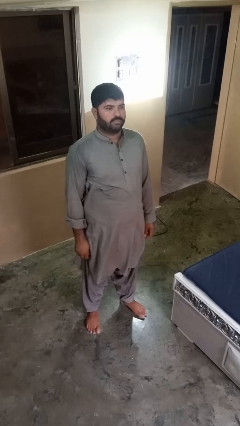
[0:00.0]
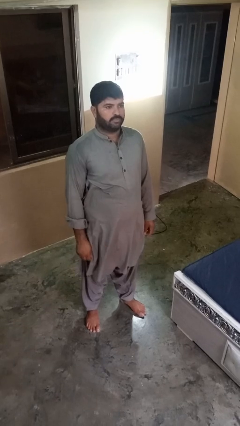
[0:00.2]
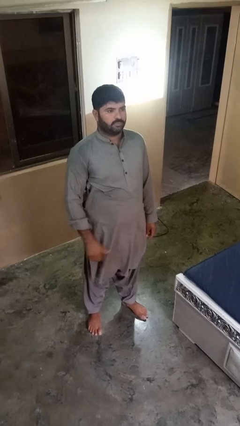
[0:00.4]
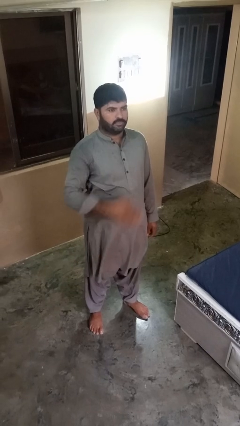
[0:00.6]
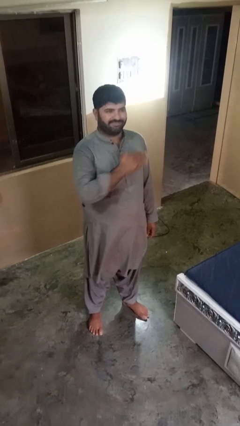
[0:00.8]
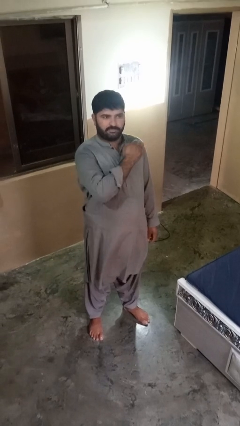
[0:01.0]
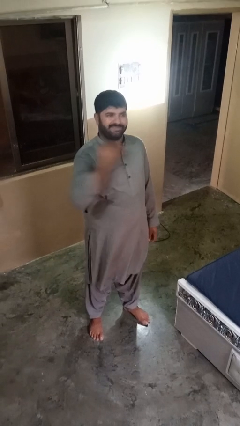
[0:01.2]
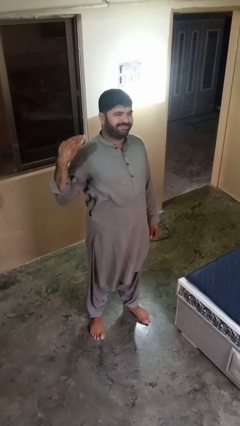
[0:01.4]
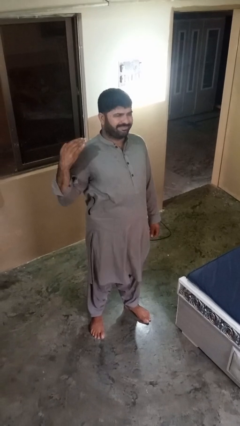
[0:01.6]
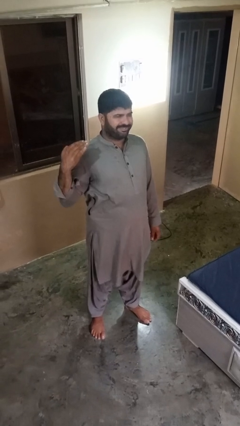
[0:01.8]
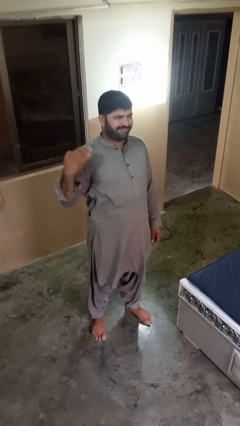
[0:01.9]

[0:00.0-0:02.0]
person gestures cut

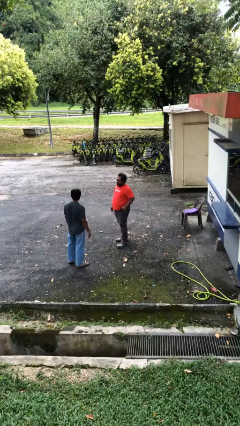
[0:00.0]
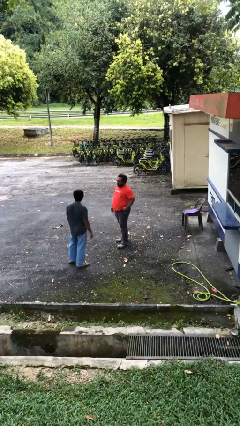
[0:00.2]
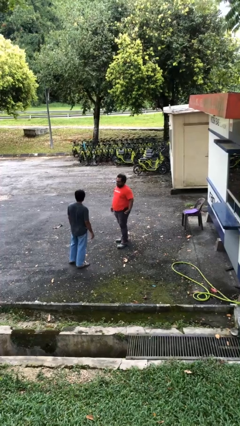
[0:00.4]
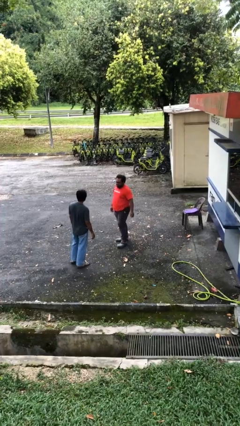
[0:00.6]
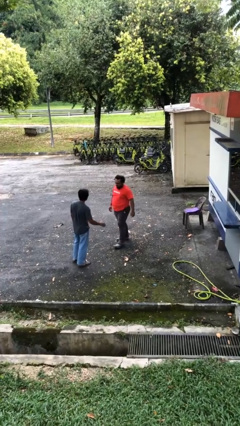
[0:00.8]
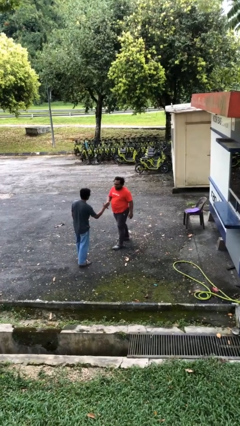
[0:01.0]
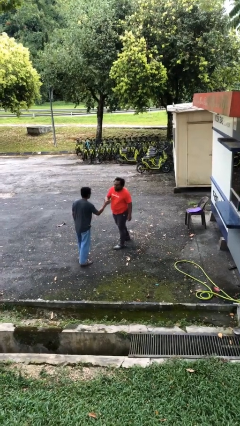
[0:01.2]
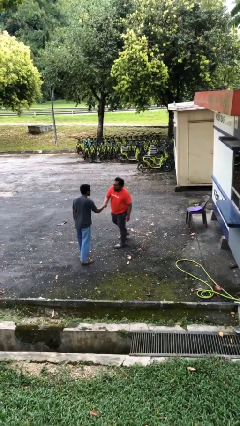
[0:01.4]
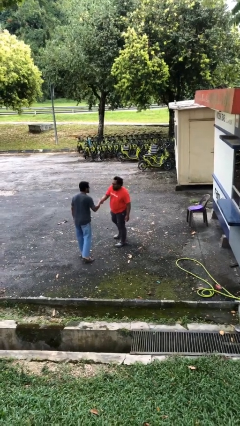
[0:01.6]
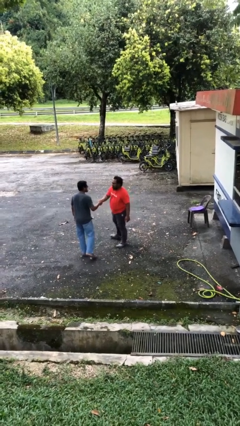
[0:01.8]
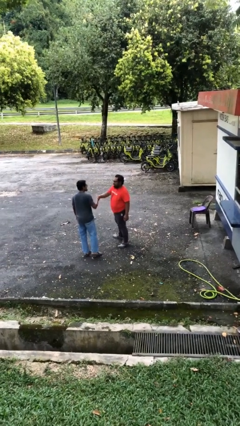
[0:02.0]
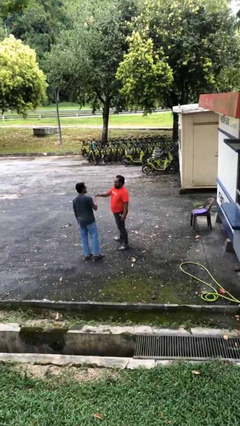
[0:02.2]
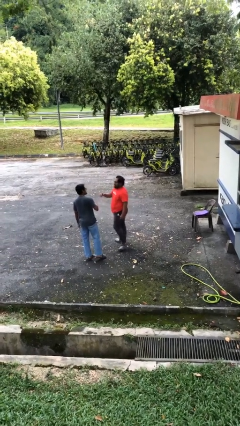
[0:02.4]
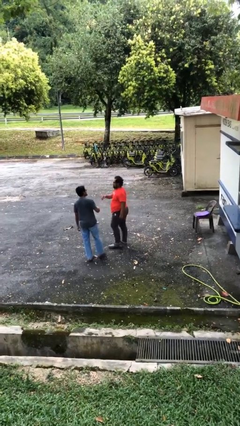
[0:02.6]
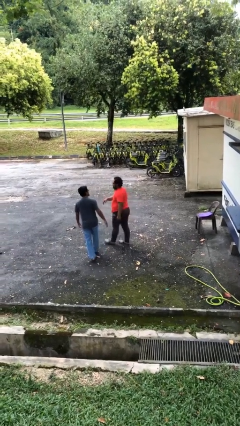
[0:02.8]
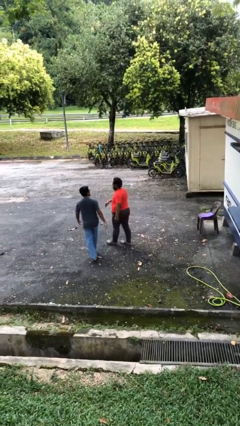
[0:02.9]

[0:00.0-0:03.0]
person shakes hand

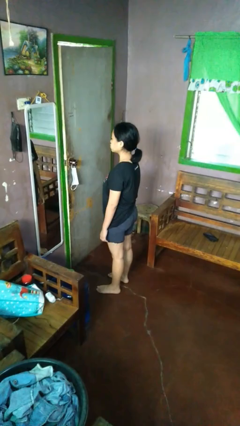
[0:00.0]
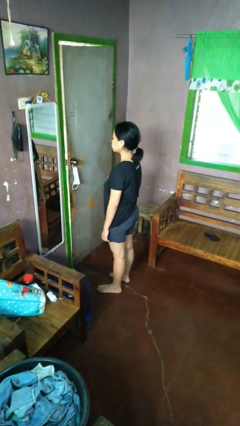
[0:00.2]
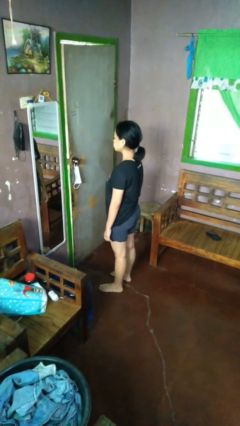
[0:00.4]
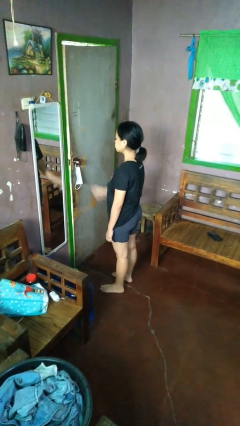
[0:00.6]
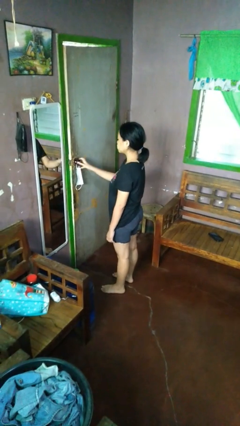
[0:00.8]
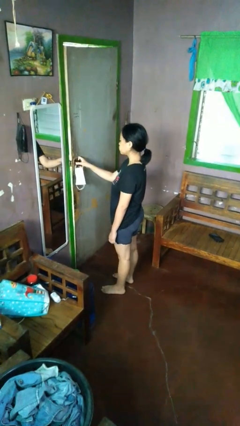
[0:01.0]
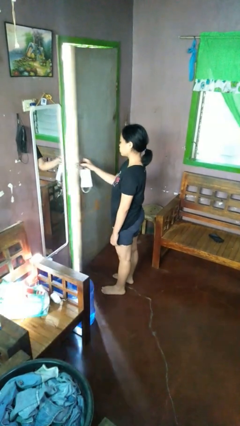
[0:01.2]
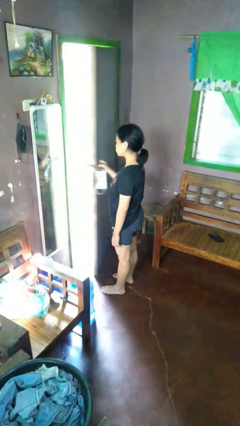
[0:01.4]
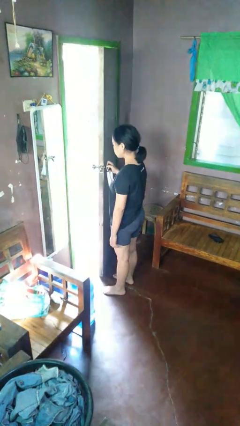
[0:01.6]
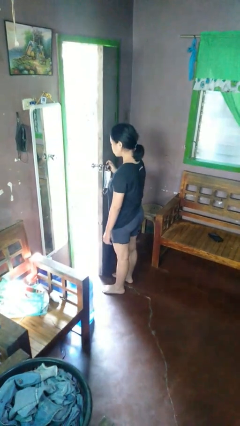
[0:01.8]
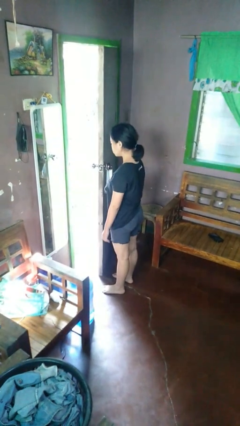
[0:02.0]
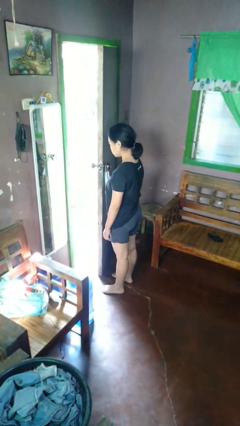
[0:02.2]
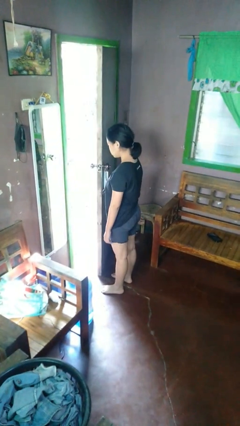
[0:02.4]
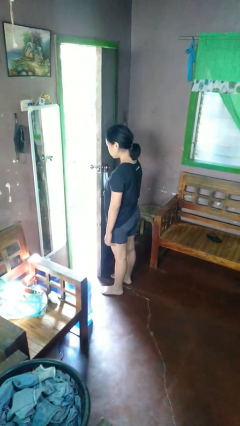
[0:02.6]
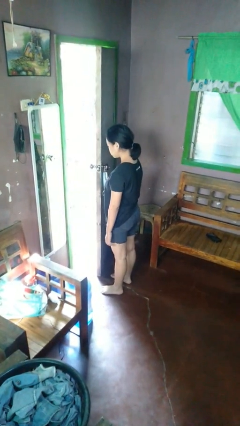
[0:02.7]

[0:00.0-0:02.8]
person opens facility door

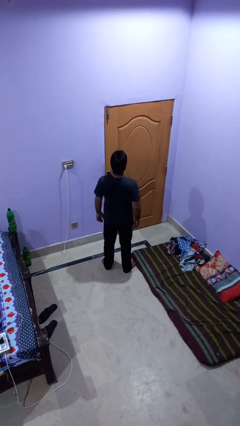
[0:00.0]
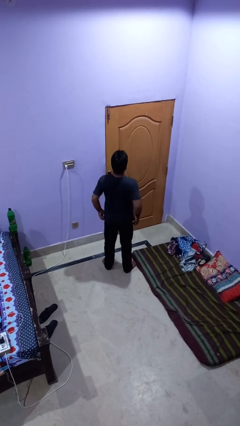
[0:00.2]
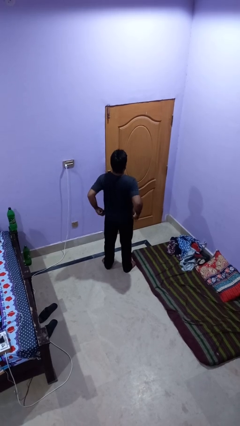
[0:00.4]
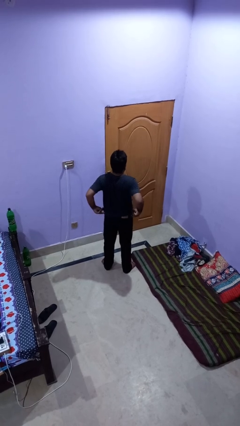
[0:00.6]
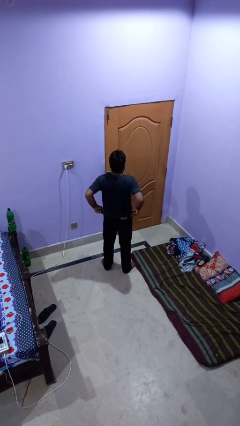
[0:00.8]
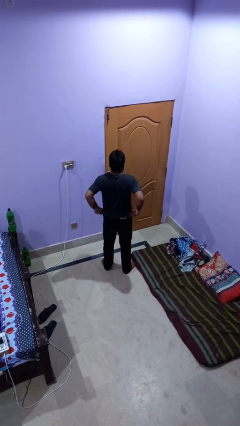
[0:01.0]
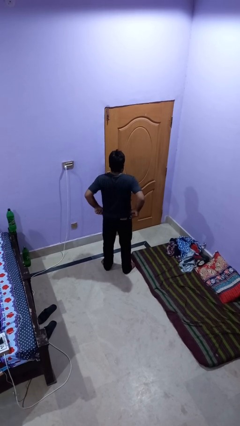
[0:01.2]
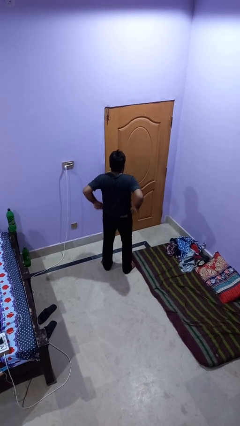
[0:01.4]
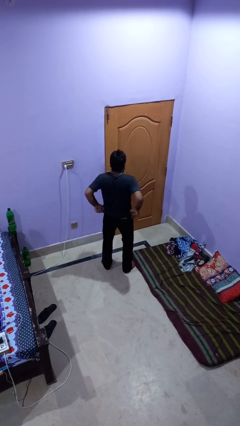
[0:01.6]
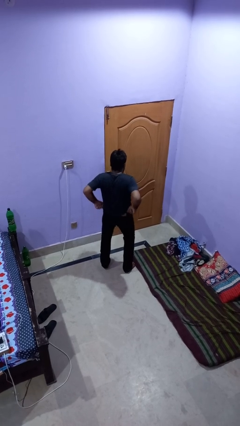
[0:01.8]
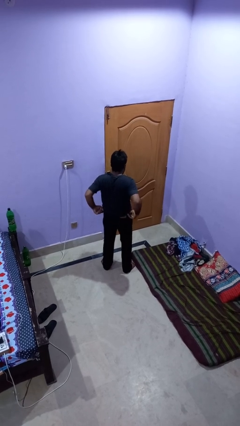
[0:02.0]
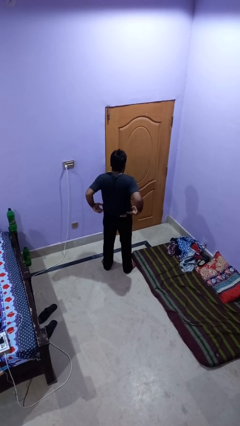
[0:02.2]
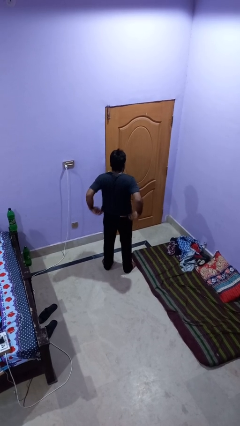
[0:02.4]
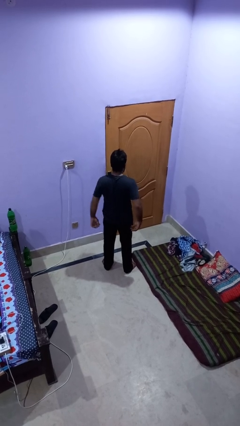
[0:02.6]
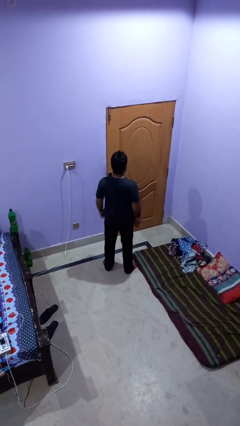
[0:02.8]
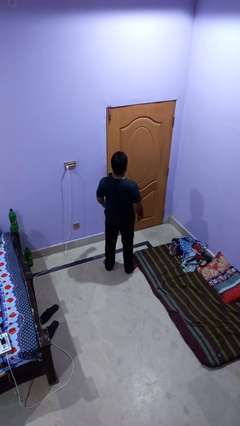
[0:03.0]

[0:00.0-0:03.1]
person hikes up pants

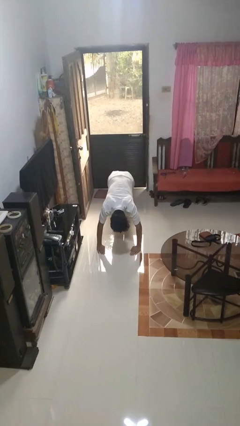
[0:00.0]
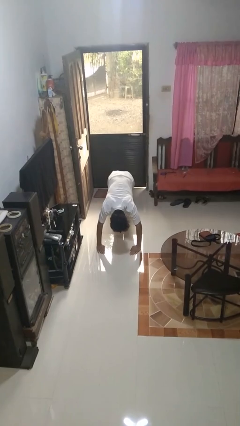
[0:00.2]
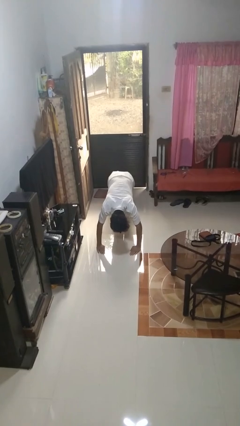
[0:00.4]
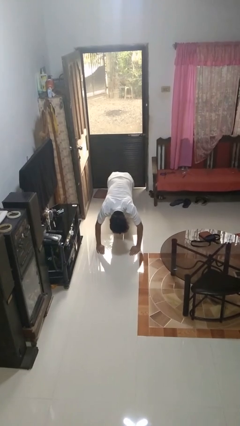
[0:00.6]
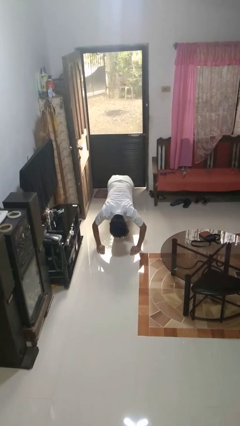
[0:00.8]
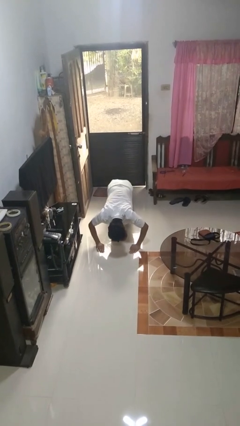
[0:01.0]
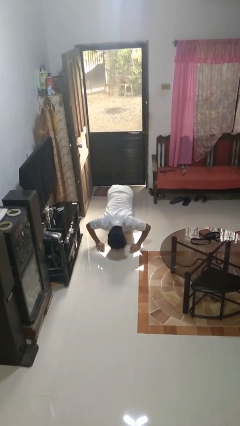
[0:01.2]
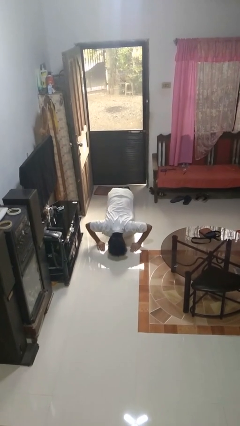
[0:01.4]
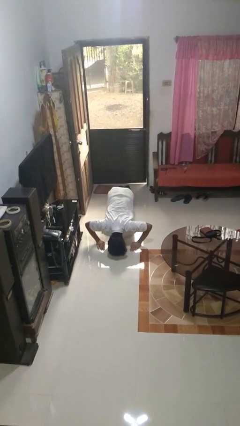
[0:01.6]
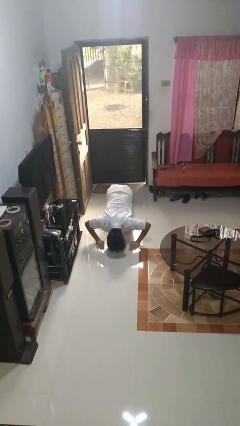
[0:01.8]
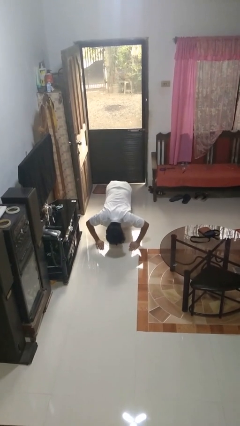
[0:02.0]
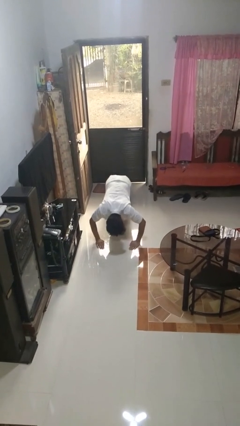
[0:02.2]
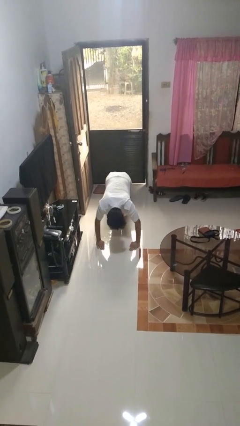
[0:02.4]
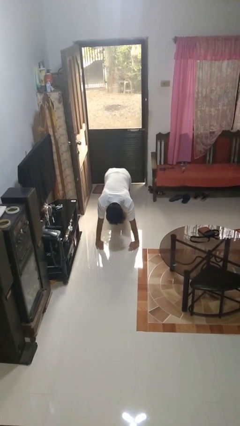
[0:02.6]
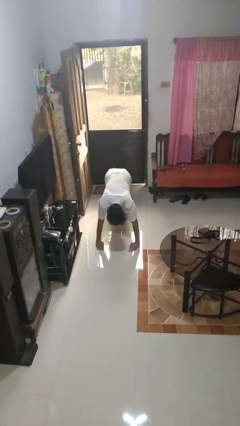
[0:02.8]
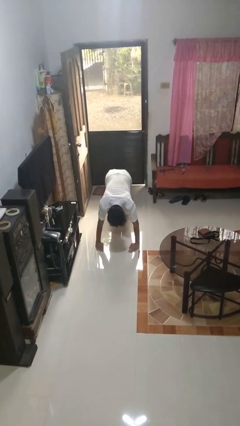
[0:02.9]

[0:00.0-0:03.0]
person exercises with pushup

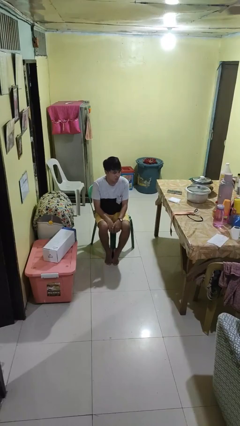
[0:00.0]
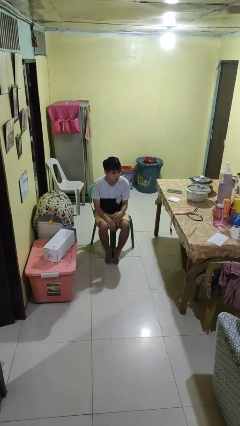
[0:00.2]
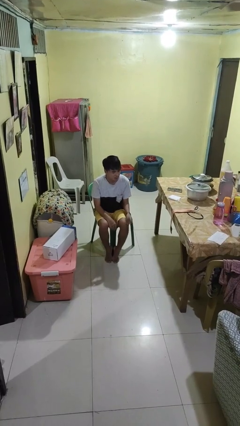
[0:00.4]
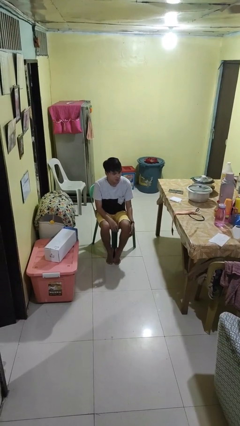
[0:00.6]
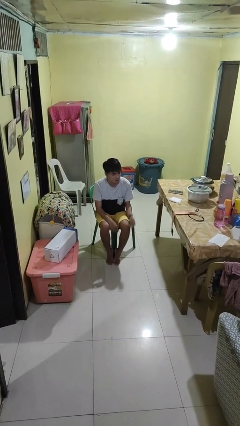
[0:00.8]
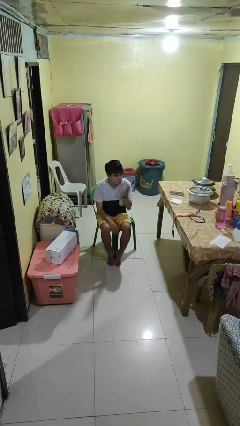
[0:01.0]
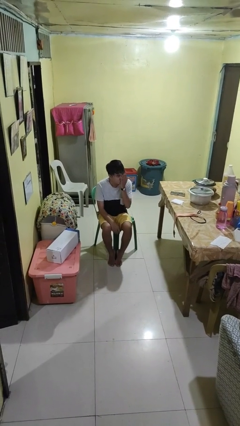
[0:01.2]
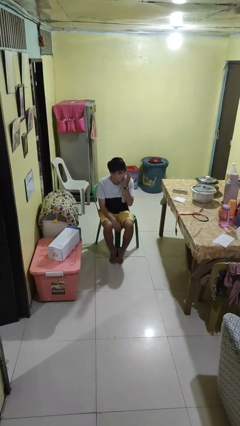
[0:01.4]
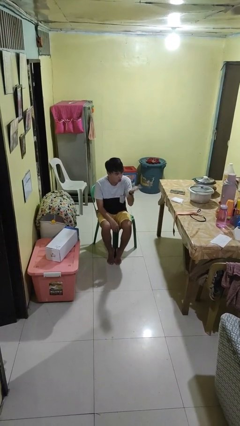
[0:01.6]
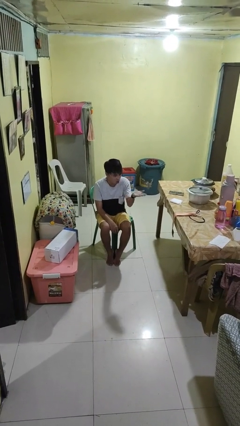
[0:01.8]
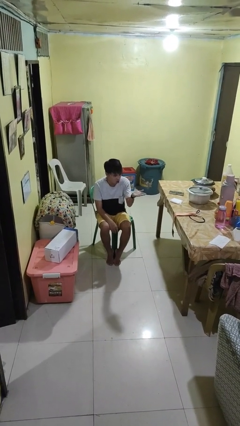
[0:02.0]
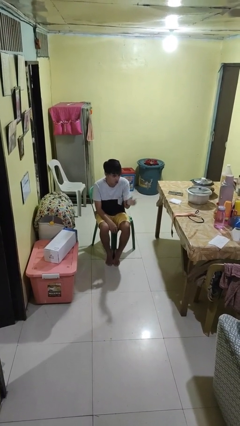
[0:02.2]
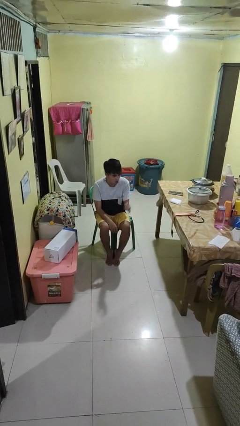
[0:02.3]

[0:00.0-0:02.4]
person gestures blow kiss

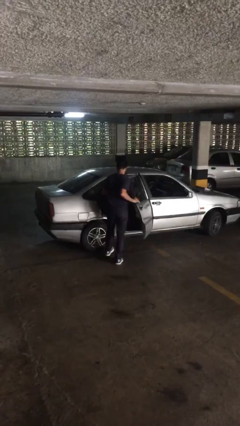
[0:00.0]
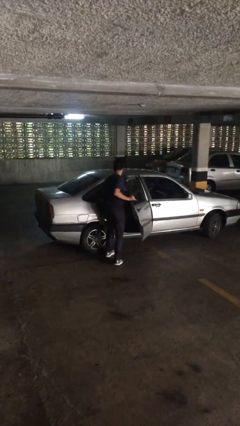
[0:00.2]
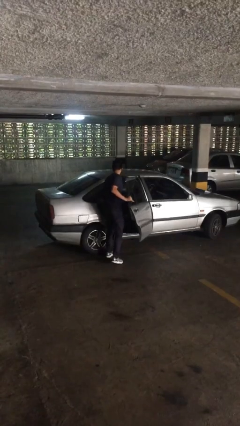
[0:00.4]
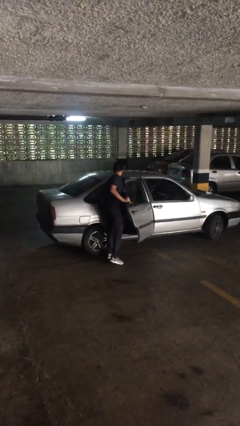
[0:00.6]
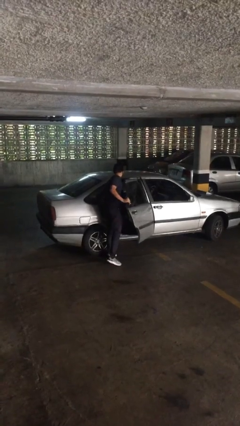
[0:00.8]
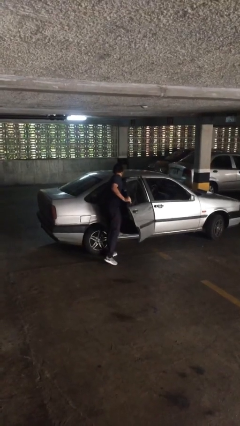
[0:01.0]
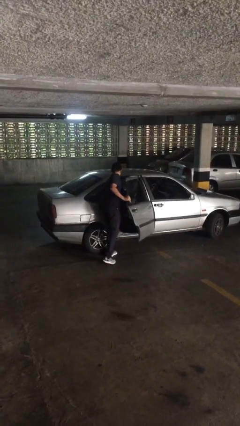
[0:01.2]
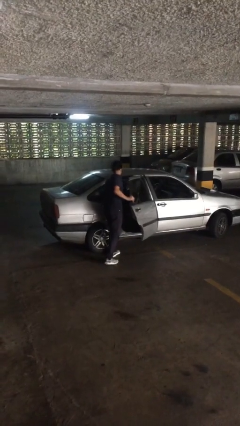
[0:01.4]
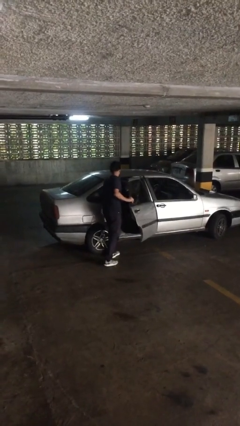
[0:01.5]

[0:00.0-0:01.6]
person loads car
